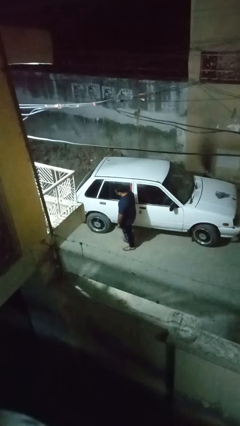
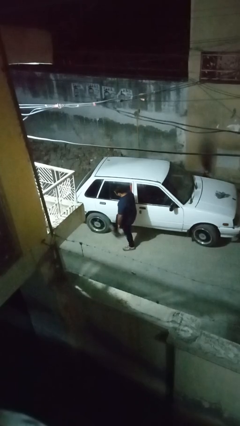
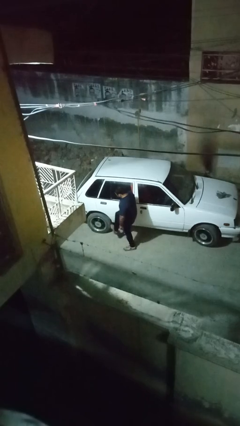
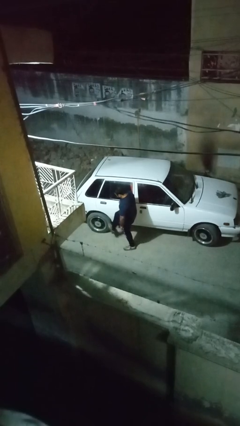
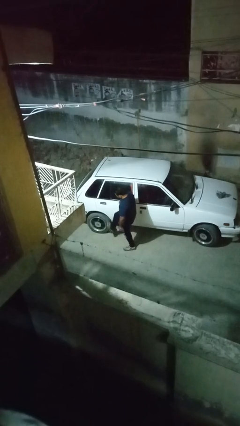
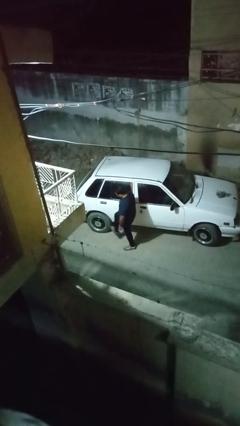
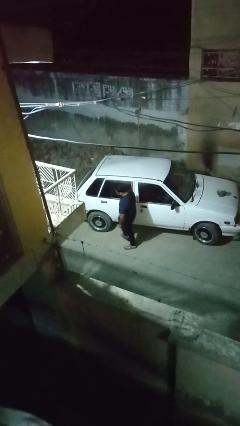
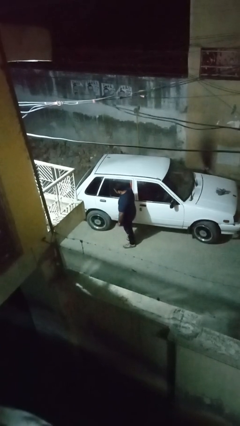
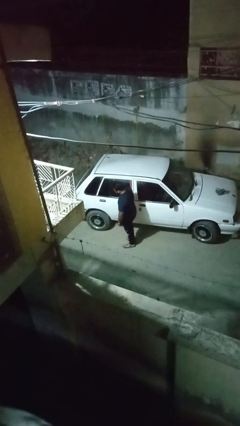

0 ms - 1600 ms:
person kicks car tires

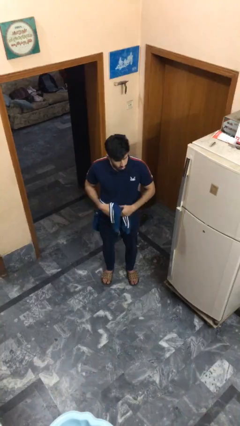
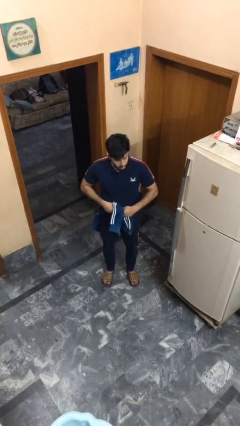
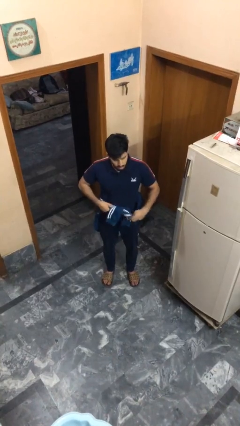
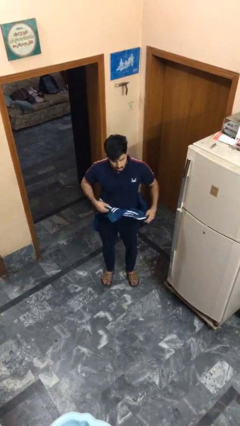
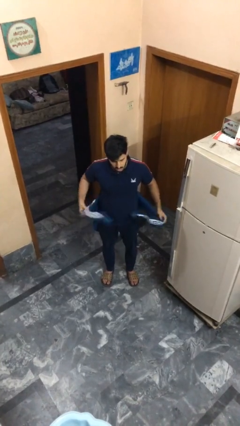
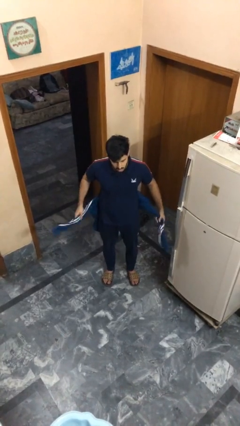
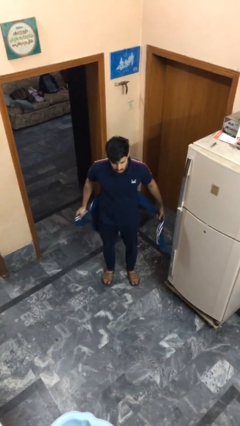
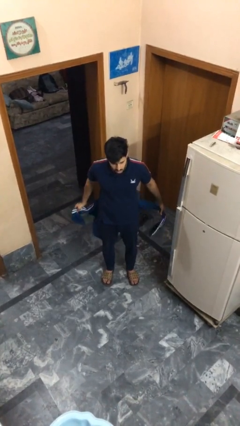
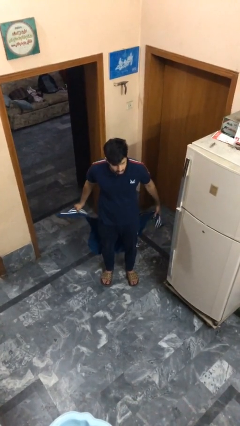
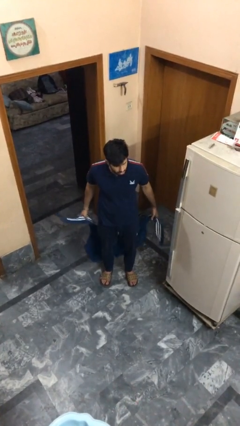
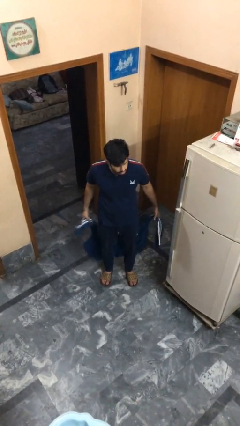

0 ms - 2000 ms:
person unties jacket around waist

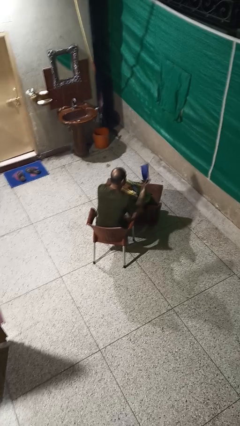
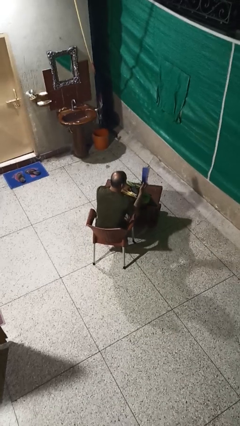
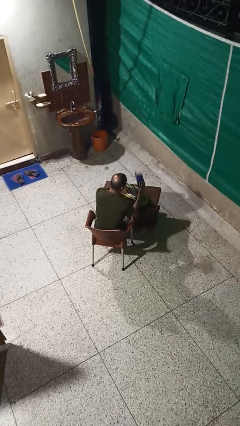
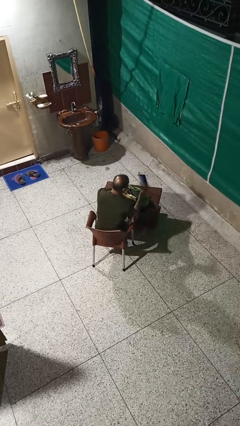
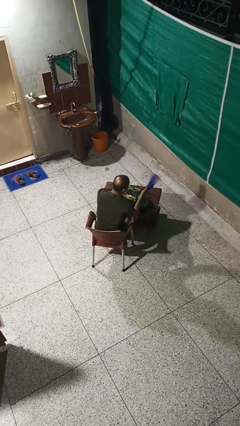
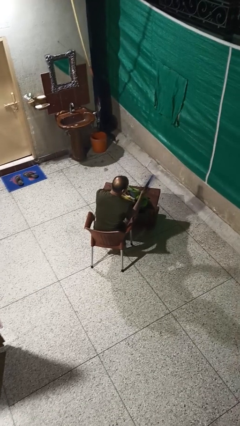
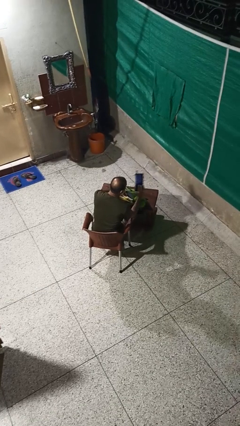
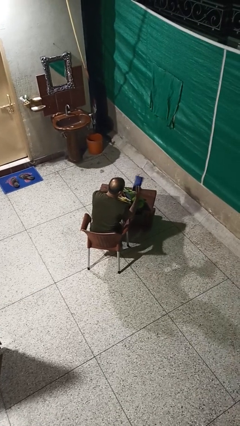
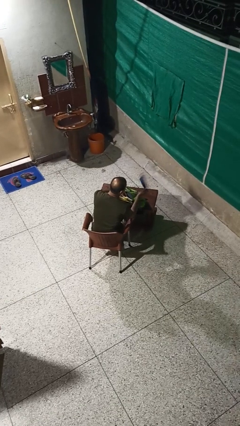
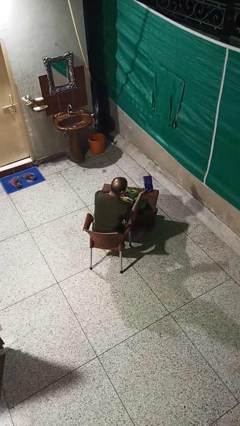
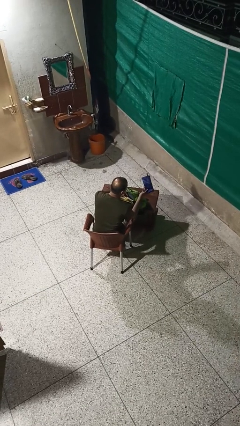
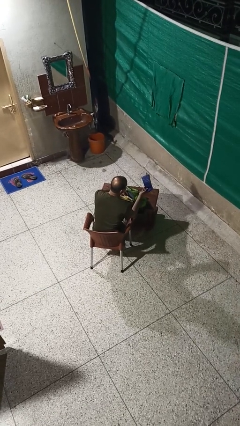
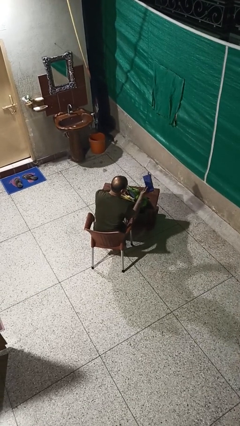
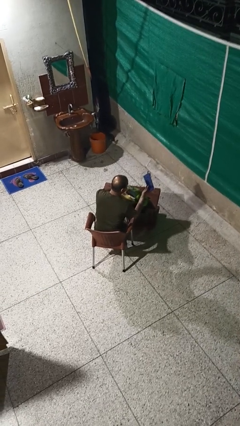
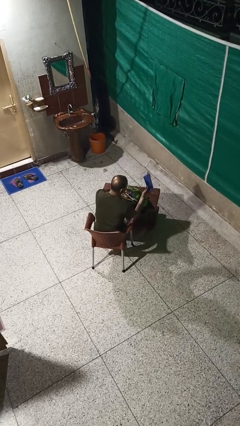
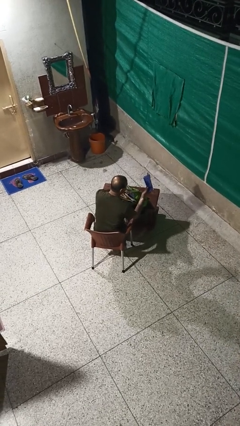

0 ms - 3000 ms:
person takes object from backpack

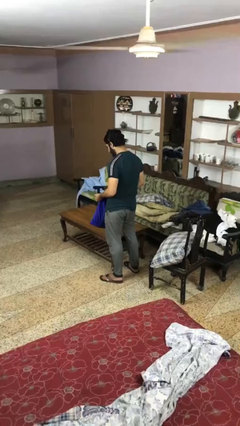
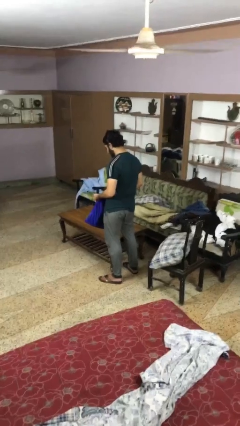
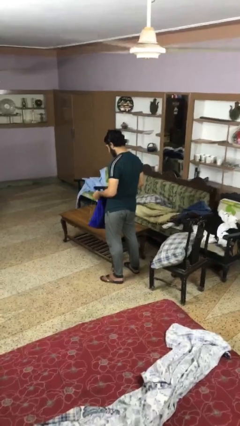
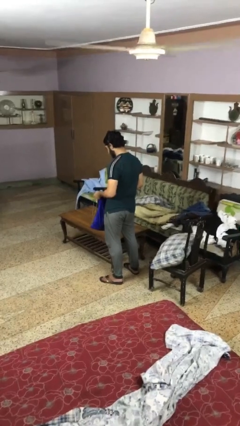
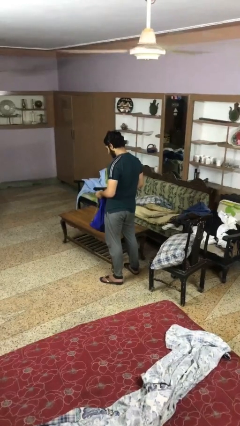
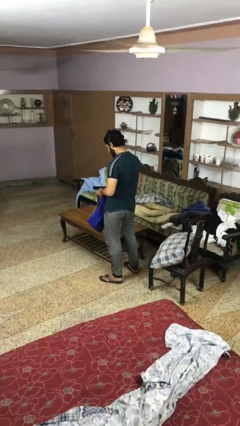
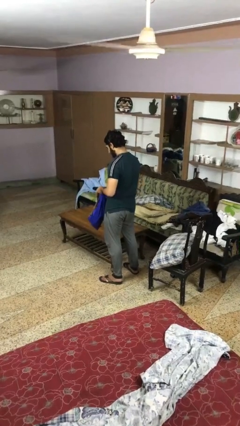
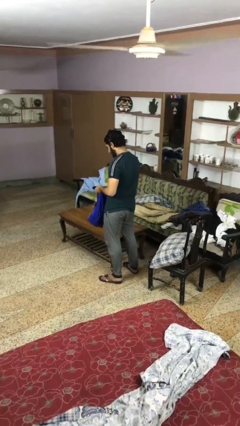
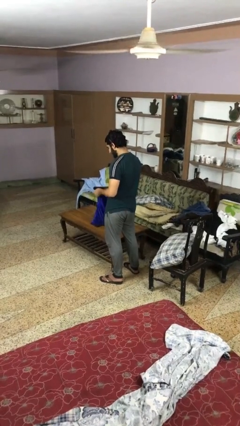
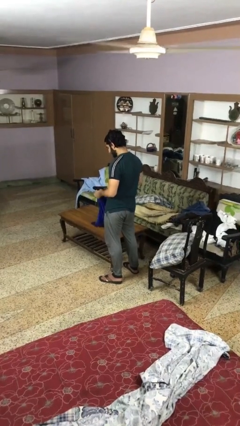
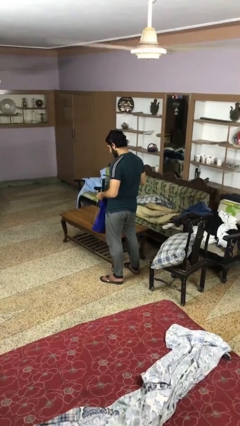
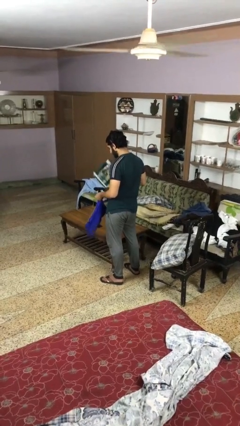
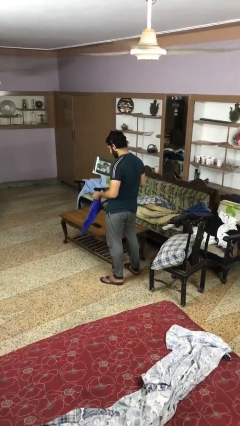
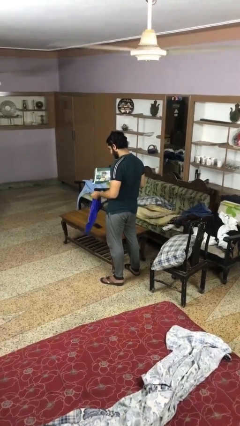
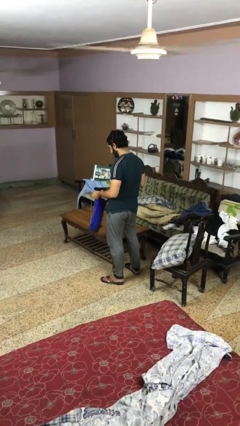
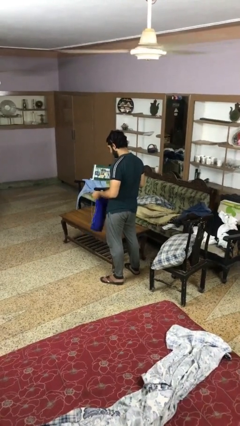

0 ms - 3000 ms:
person takes object from bag

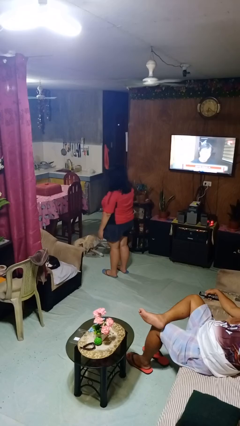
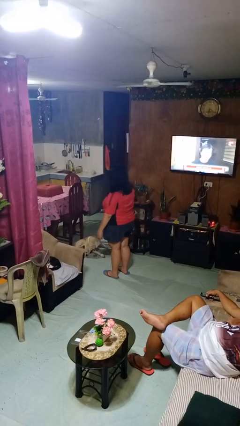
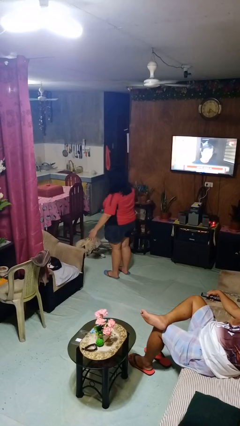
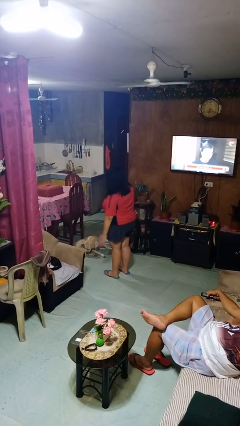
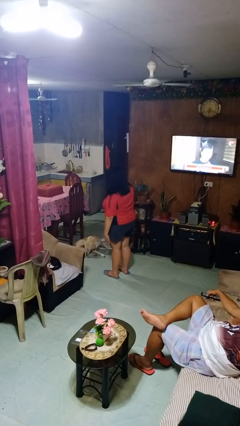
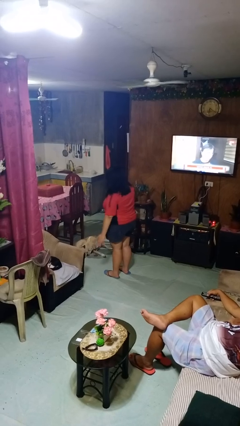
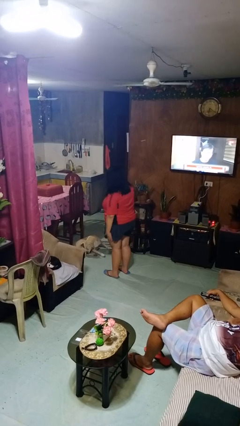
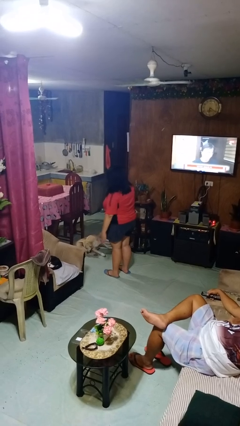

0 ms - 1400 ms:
person slaps hands on thighs

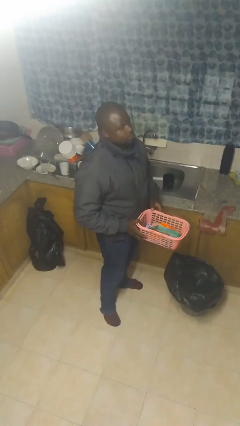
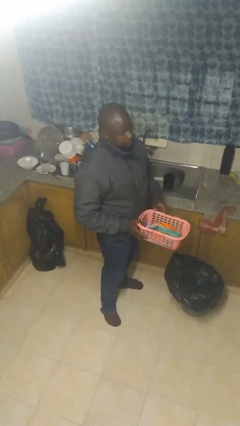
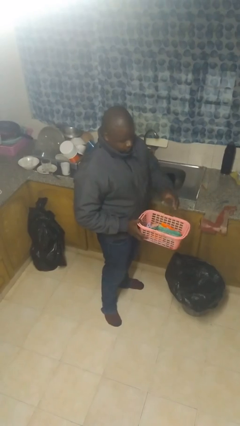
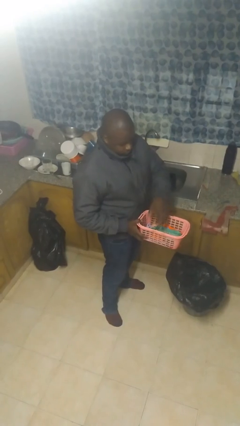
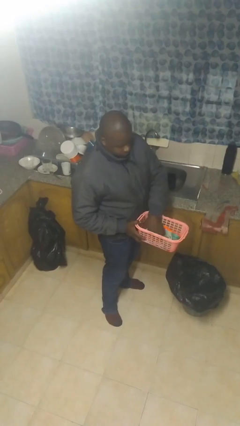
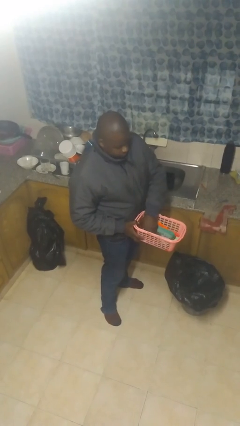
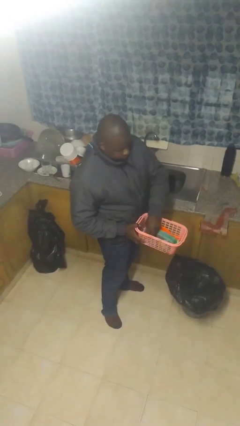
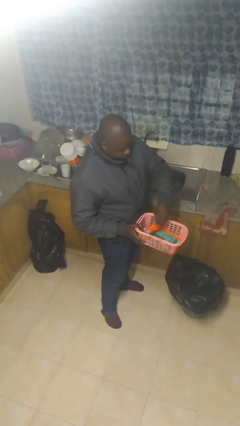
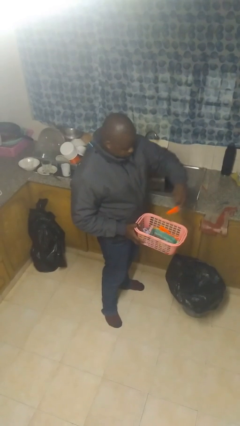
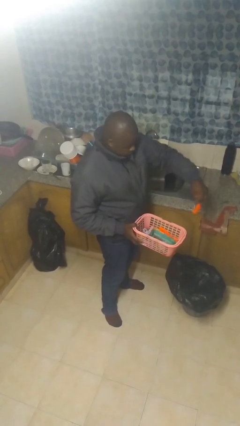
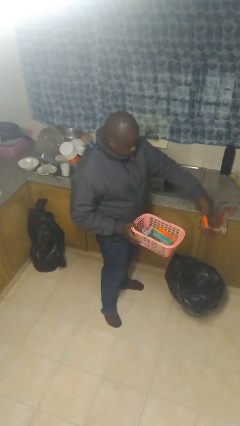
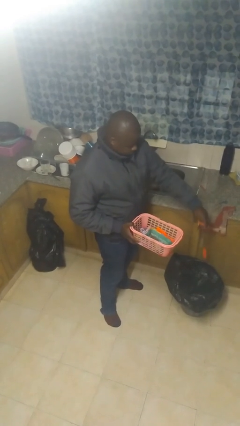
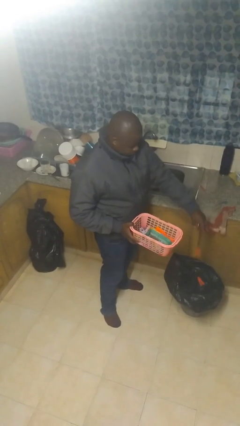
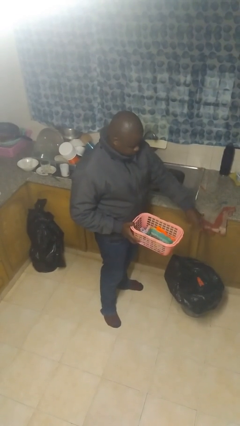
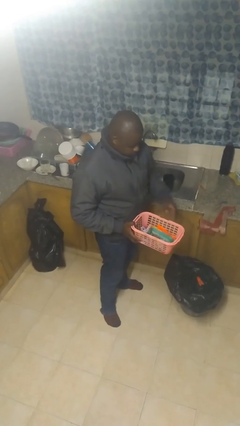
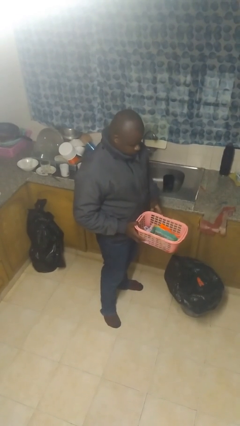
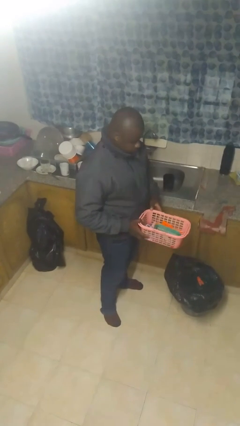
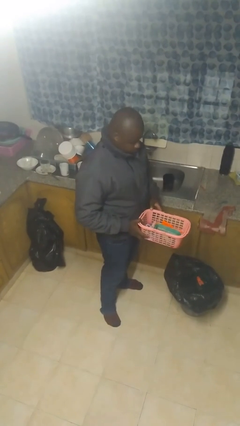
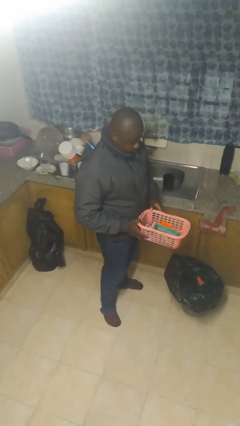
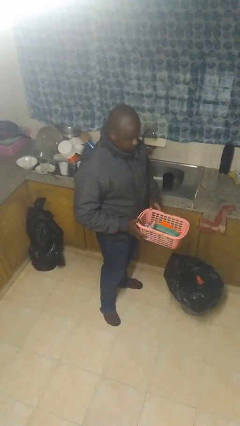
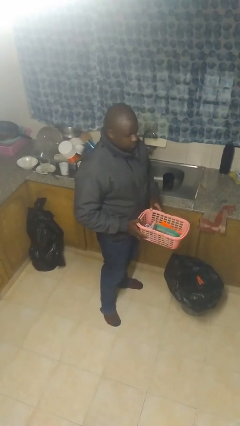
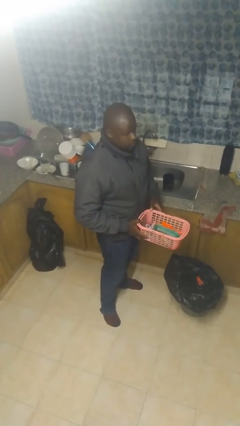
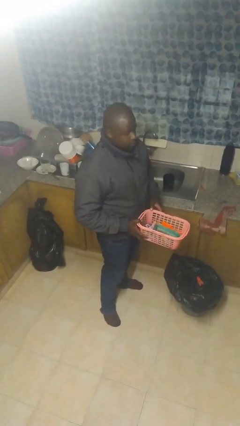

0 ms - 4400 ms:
person discards trash

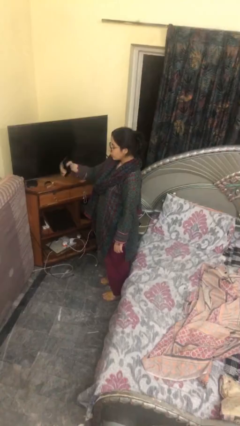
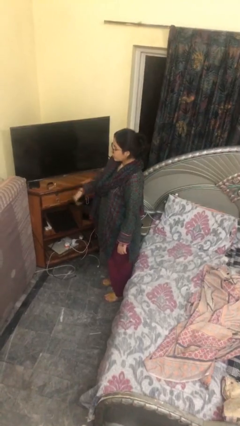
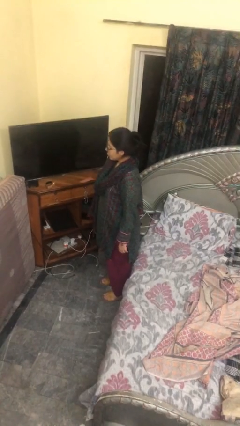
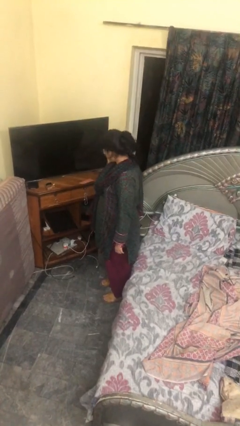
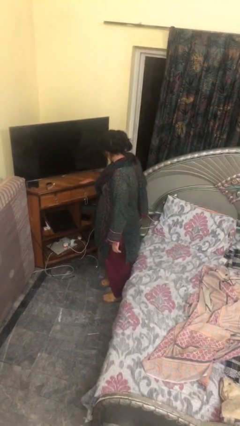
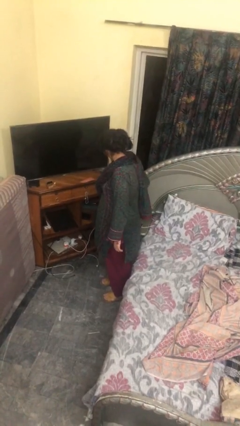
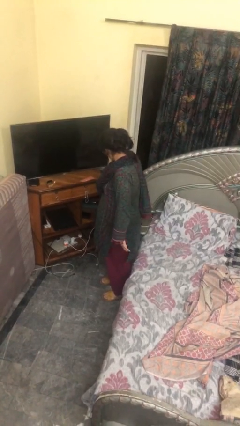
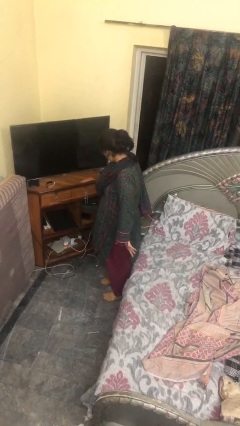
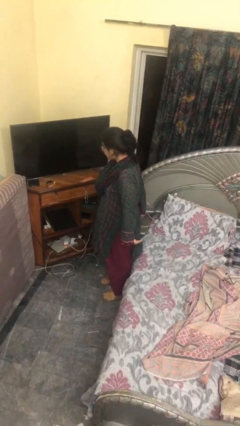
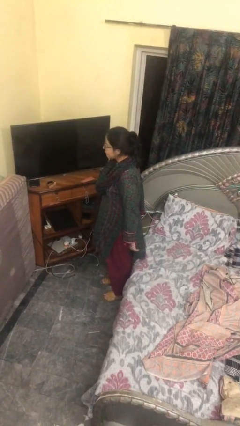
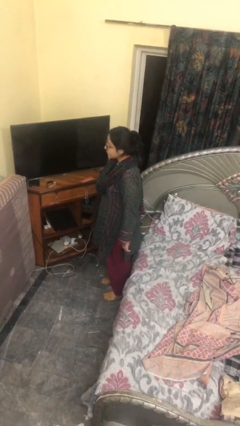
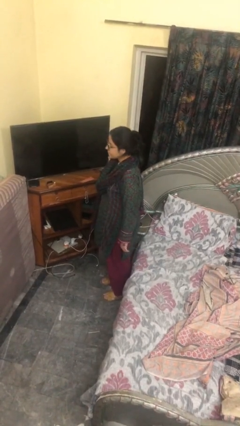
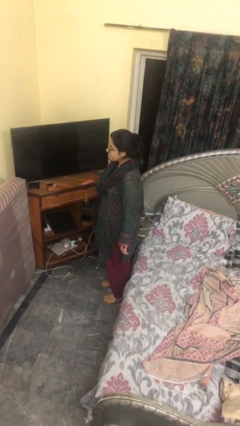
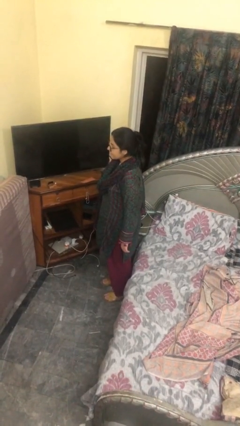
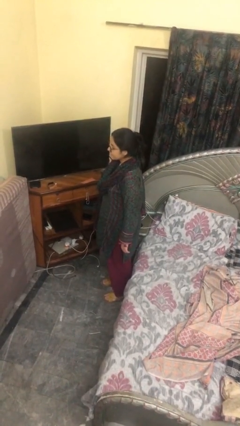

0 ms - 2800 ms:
person puts phone into pocket
